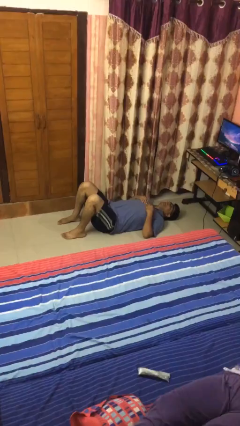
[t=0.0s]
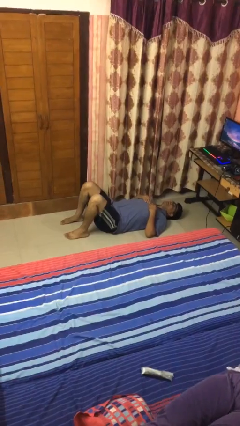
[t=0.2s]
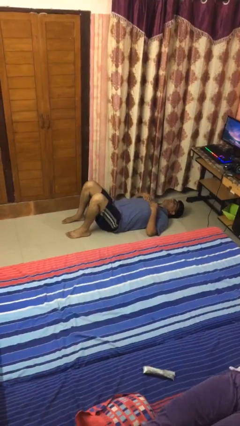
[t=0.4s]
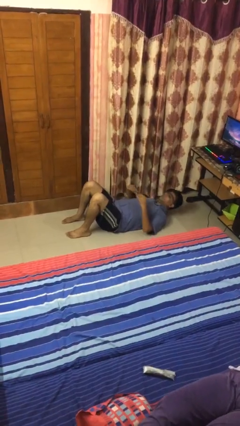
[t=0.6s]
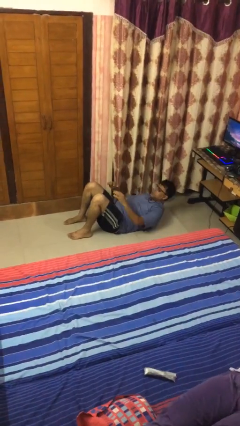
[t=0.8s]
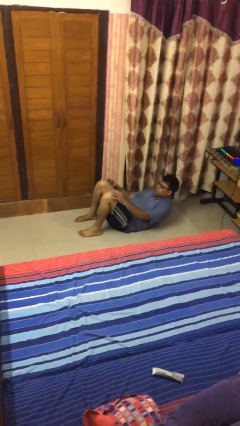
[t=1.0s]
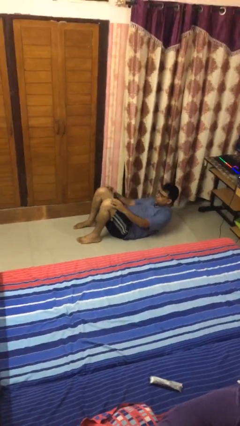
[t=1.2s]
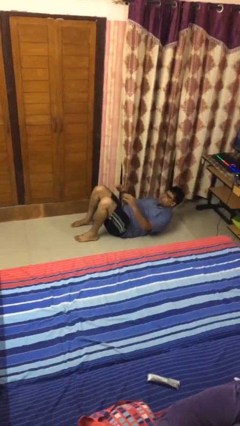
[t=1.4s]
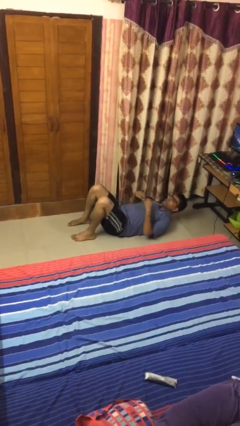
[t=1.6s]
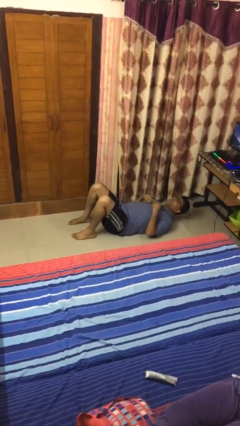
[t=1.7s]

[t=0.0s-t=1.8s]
person exercises with situp

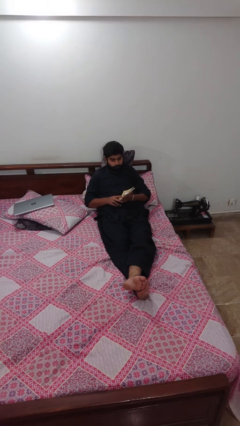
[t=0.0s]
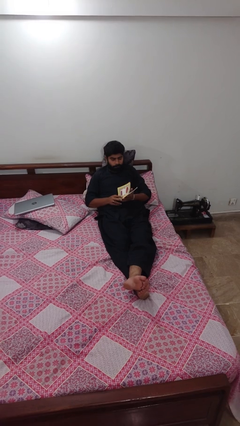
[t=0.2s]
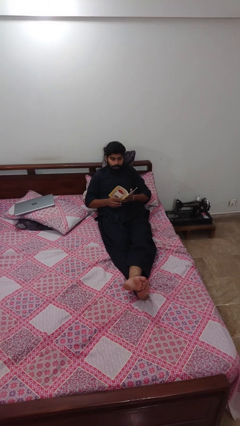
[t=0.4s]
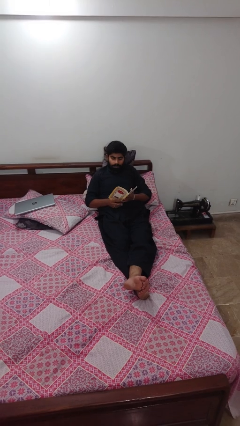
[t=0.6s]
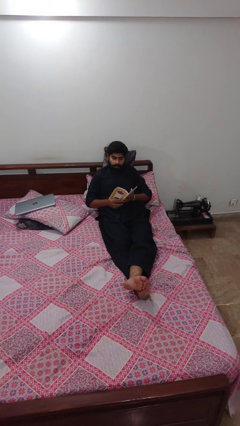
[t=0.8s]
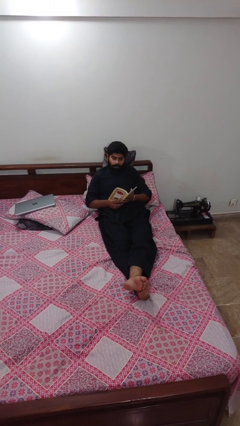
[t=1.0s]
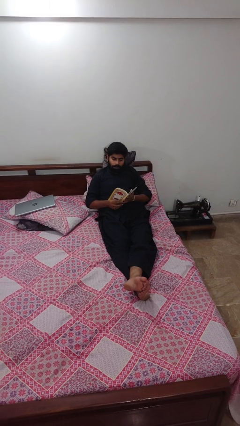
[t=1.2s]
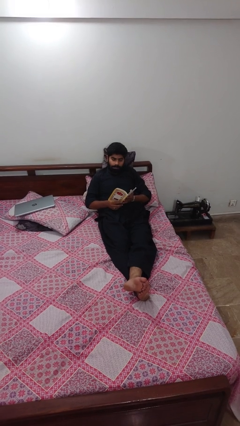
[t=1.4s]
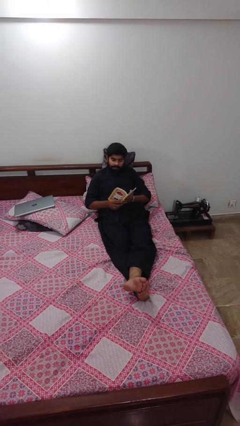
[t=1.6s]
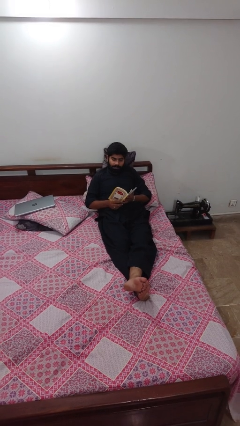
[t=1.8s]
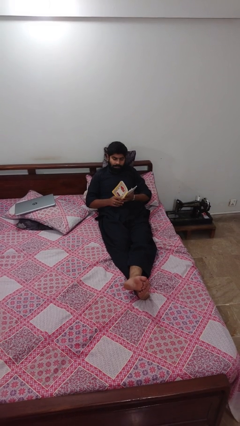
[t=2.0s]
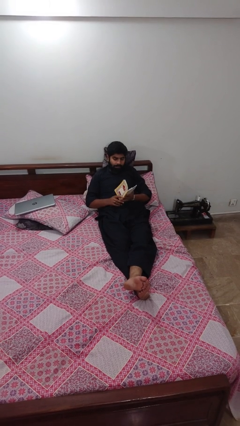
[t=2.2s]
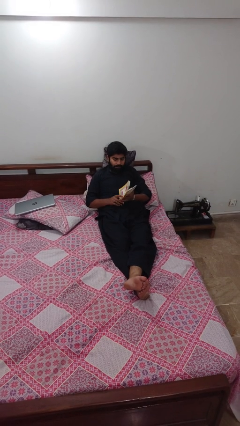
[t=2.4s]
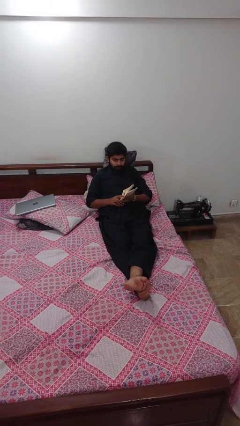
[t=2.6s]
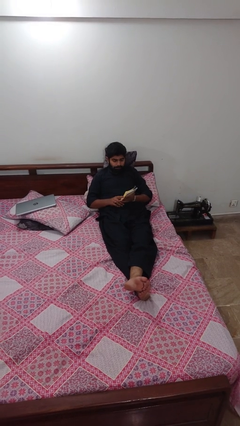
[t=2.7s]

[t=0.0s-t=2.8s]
person reads book

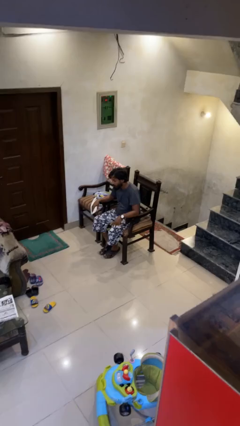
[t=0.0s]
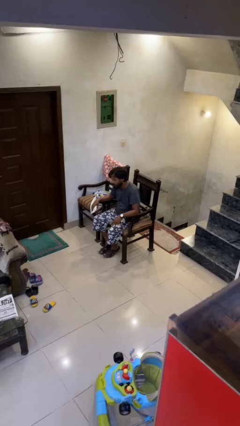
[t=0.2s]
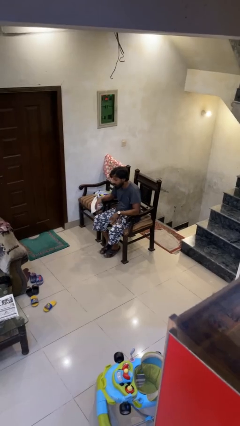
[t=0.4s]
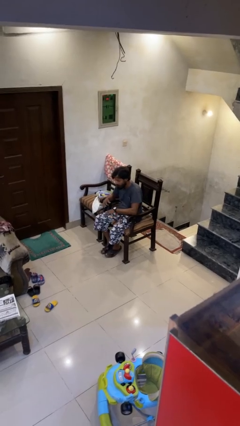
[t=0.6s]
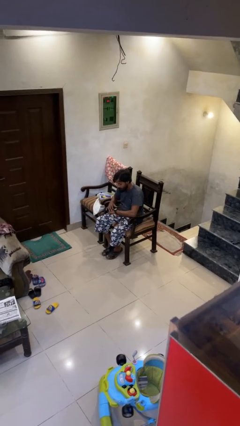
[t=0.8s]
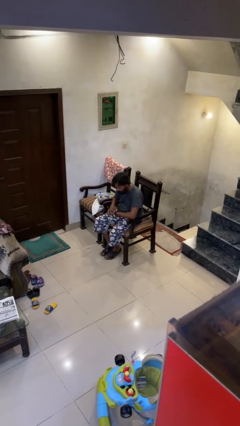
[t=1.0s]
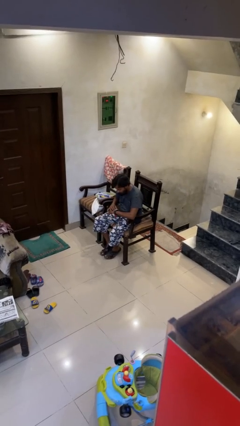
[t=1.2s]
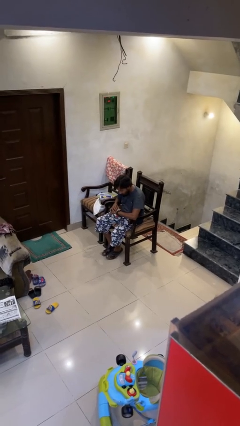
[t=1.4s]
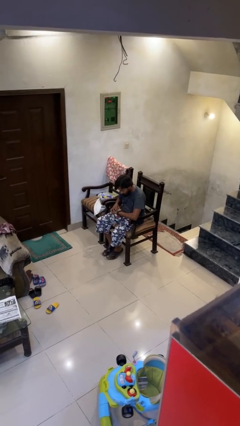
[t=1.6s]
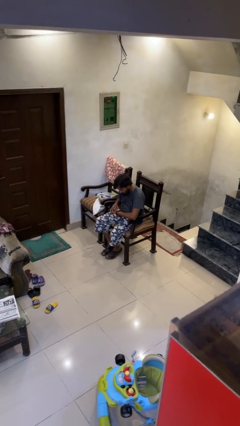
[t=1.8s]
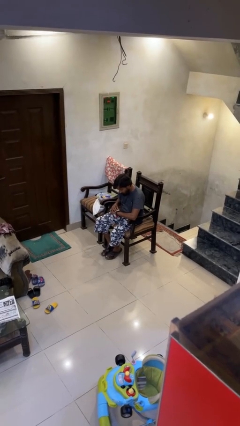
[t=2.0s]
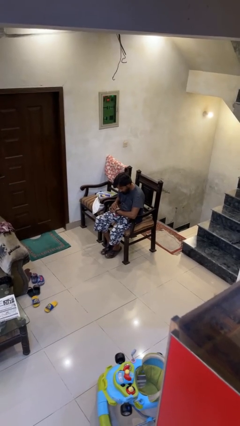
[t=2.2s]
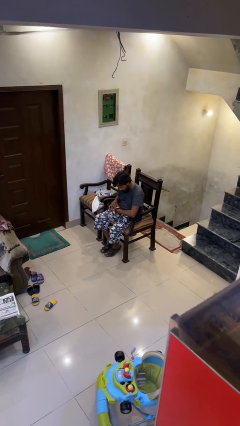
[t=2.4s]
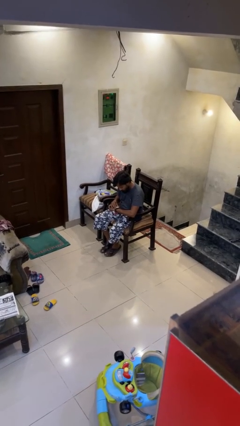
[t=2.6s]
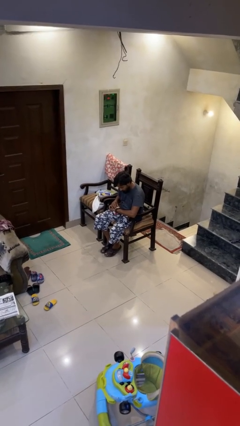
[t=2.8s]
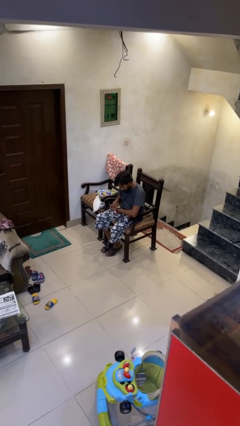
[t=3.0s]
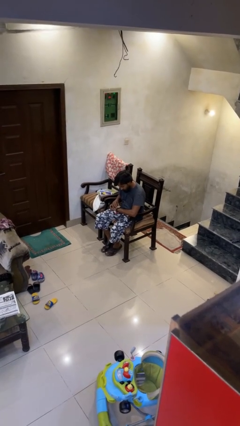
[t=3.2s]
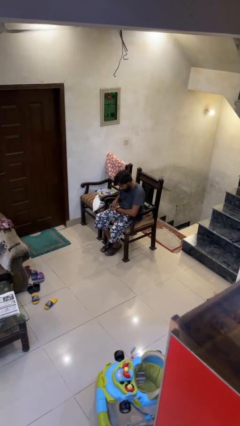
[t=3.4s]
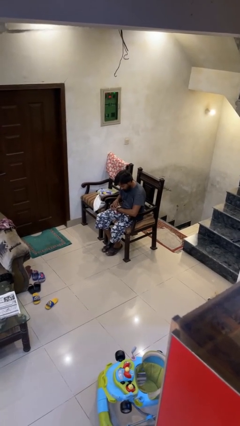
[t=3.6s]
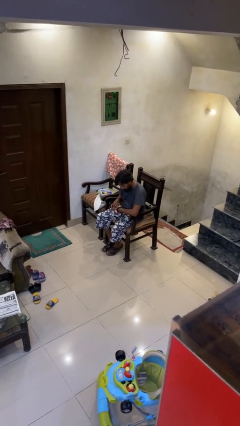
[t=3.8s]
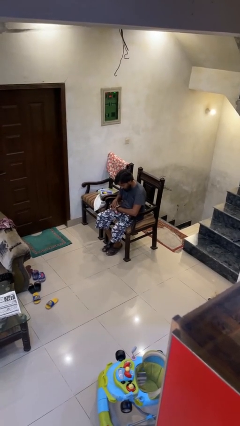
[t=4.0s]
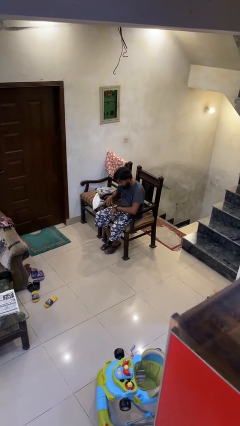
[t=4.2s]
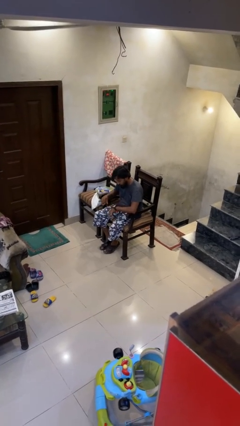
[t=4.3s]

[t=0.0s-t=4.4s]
person looks at wristwatch

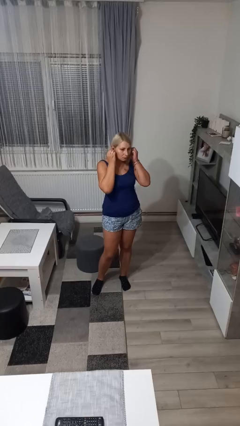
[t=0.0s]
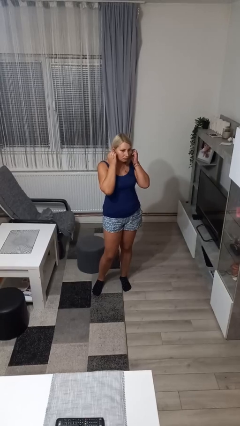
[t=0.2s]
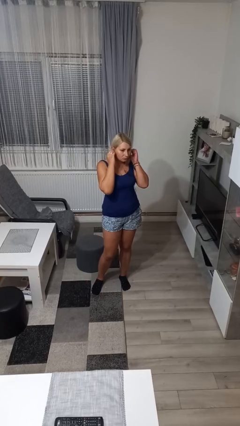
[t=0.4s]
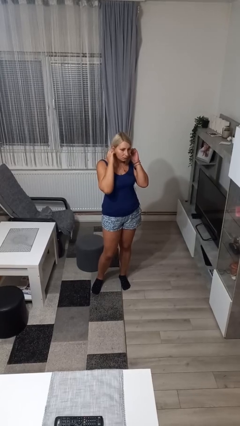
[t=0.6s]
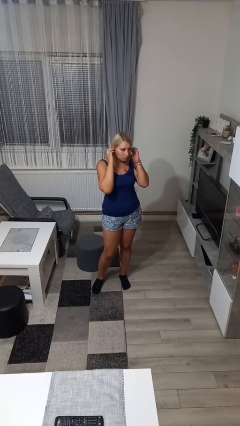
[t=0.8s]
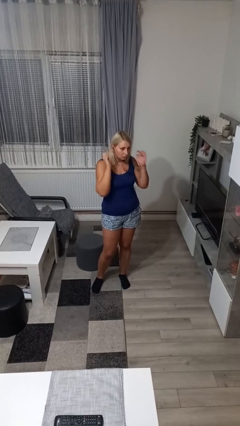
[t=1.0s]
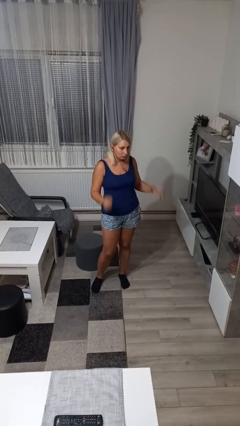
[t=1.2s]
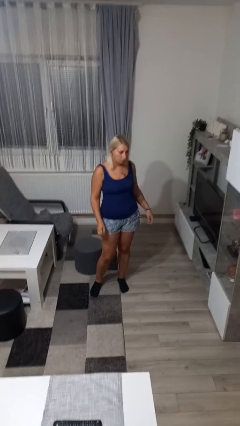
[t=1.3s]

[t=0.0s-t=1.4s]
person puts on headphones

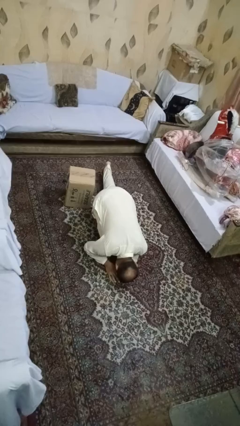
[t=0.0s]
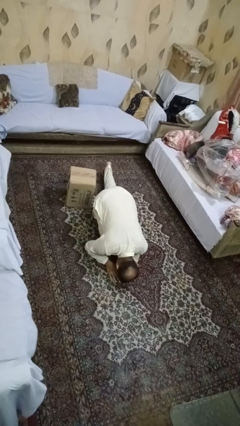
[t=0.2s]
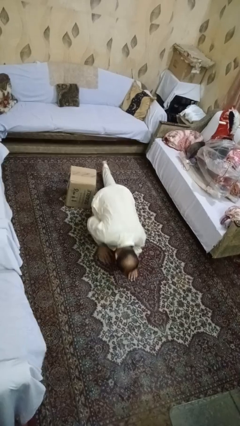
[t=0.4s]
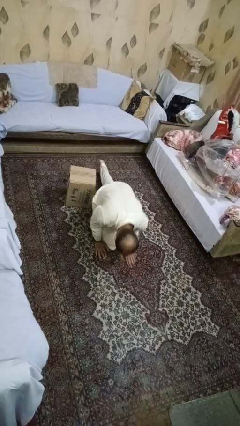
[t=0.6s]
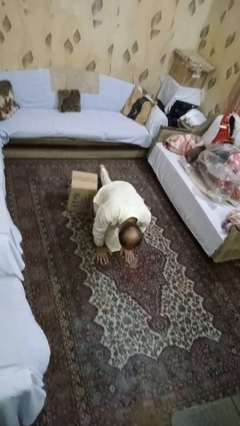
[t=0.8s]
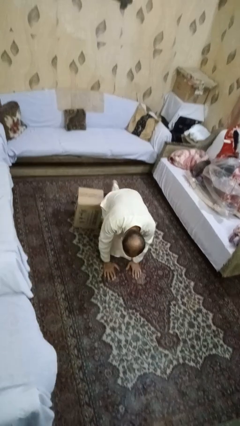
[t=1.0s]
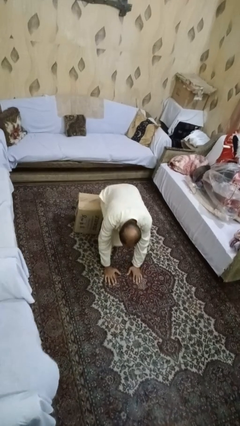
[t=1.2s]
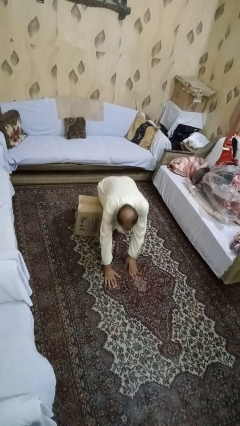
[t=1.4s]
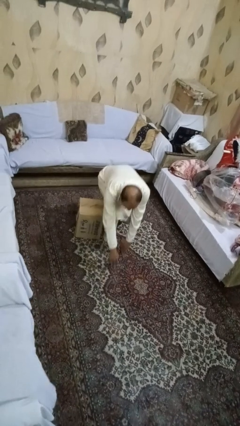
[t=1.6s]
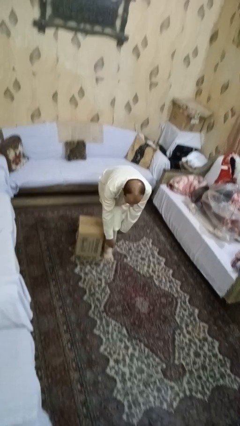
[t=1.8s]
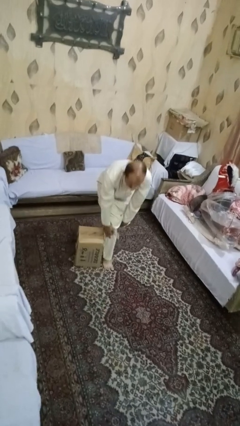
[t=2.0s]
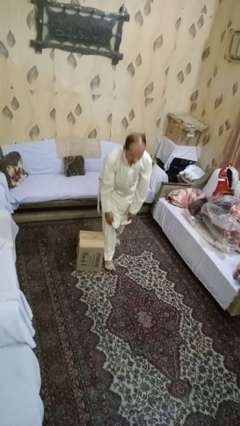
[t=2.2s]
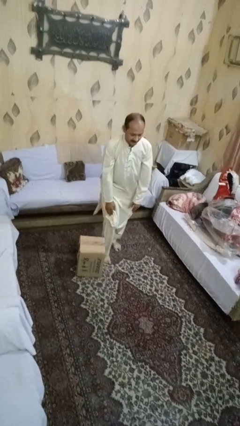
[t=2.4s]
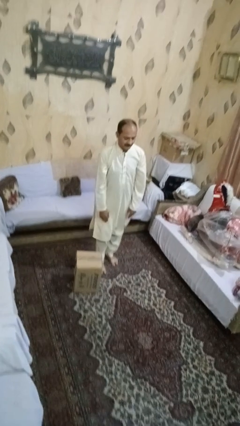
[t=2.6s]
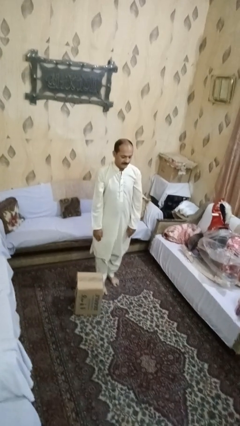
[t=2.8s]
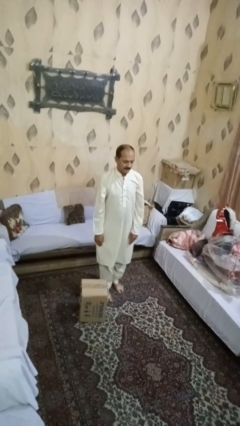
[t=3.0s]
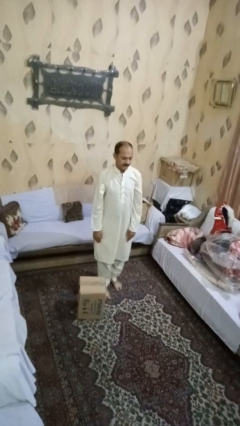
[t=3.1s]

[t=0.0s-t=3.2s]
person stands up from floor

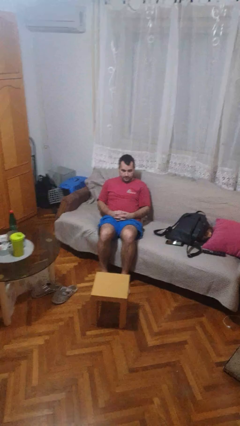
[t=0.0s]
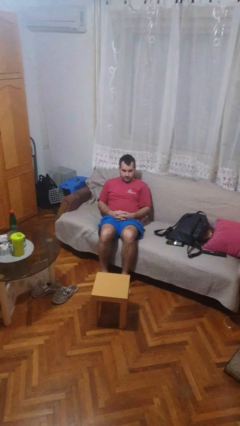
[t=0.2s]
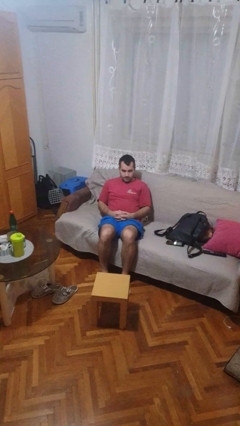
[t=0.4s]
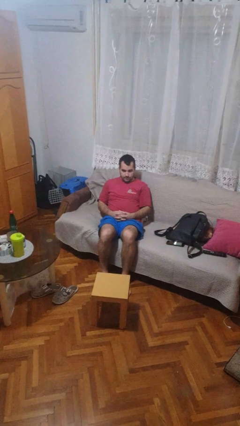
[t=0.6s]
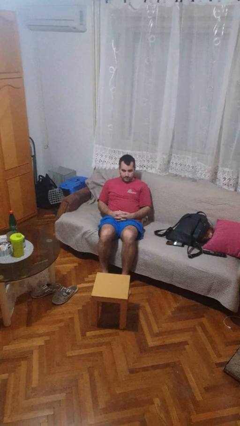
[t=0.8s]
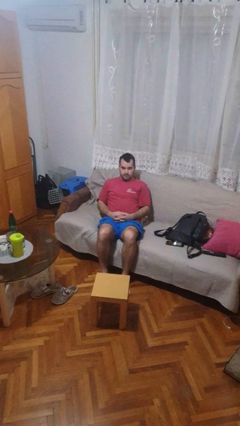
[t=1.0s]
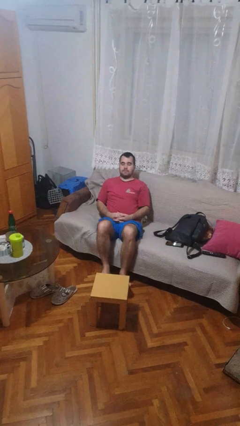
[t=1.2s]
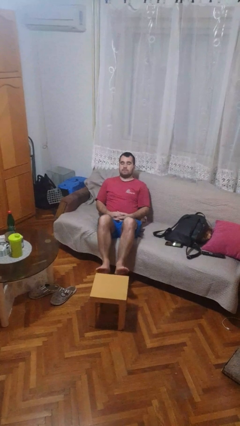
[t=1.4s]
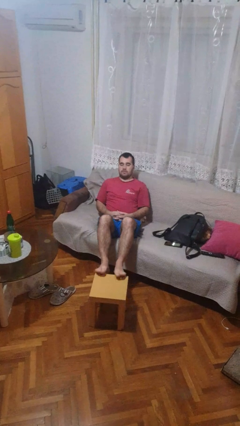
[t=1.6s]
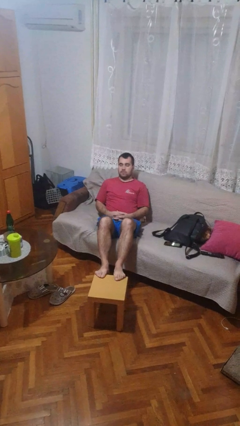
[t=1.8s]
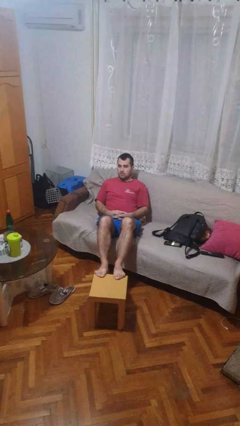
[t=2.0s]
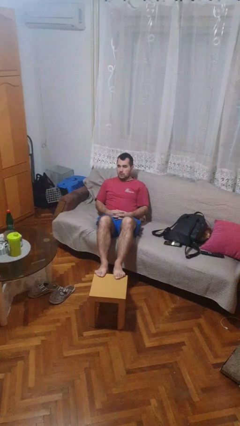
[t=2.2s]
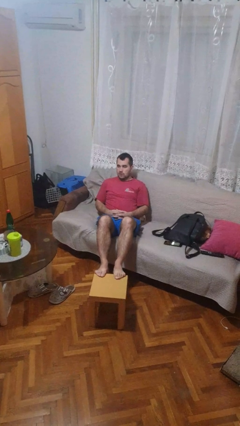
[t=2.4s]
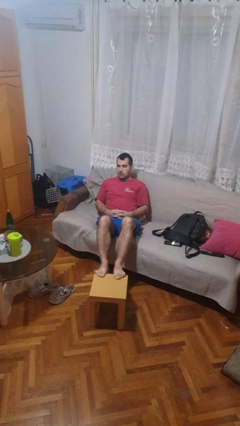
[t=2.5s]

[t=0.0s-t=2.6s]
person puts feet up

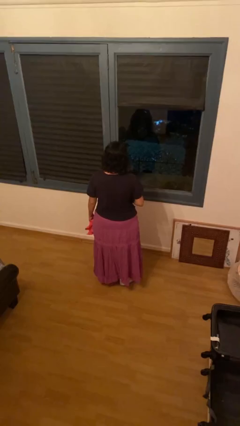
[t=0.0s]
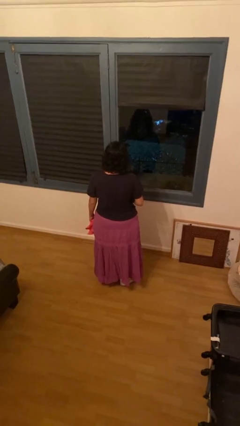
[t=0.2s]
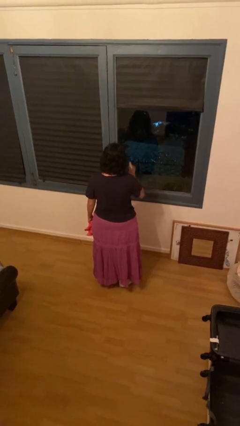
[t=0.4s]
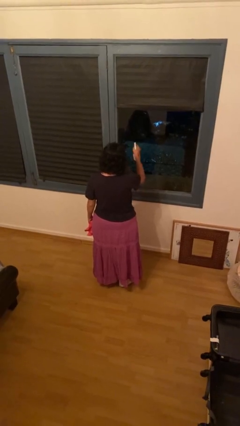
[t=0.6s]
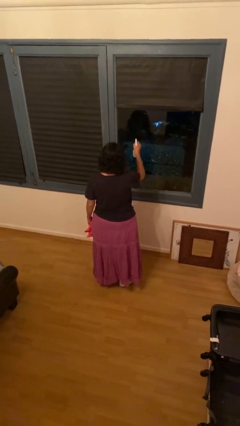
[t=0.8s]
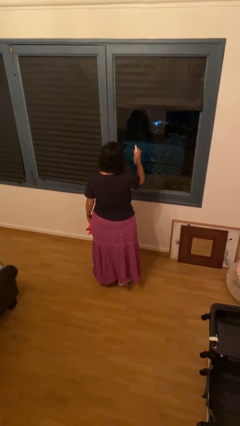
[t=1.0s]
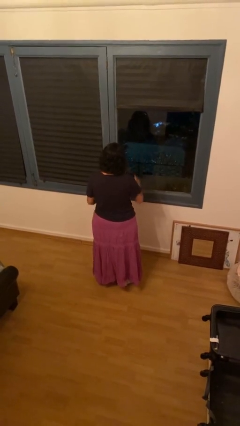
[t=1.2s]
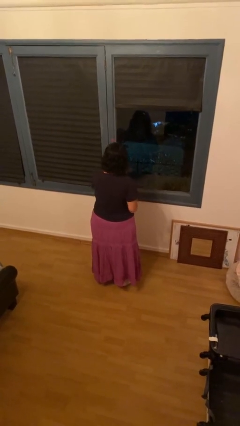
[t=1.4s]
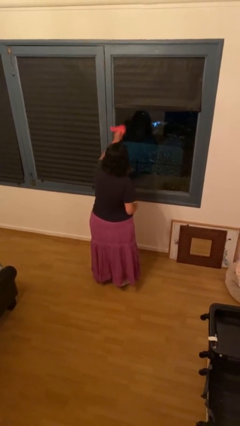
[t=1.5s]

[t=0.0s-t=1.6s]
person sprays from bottle
